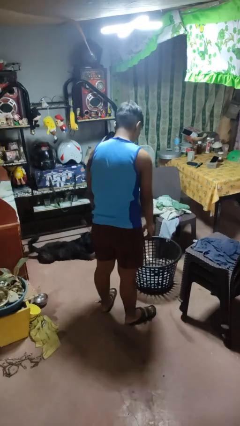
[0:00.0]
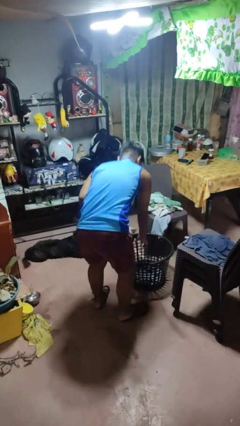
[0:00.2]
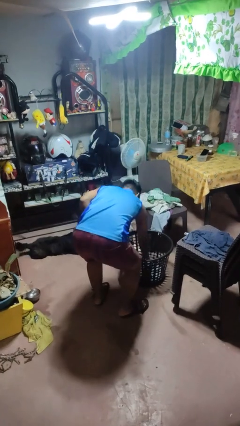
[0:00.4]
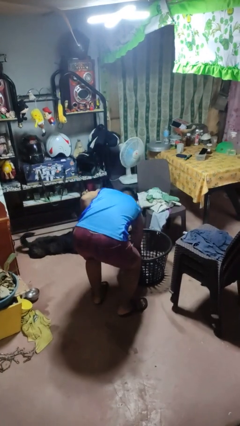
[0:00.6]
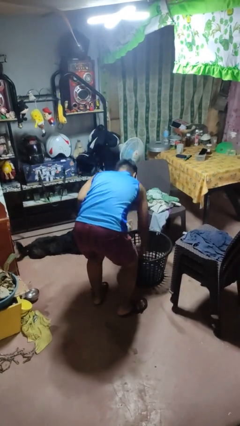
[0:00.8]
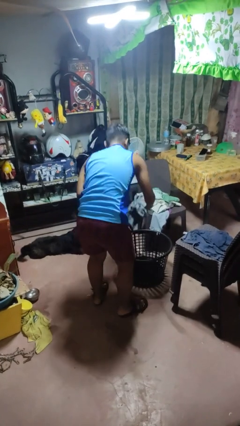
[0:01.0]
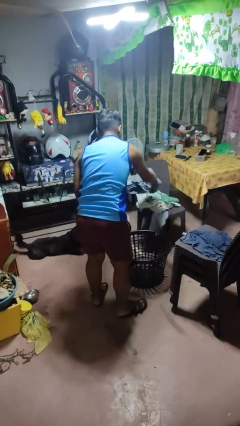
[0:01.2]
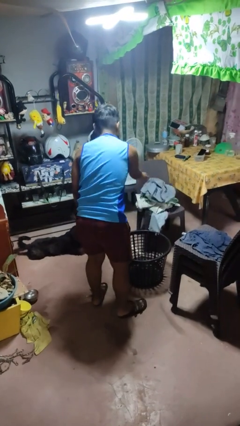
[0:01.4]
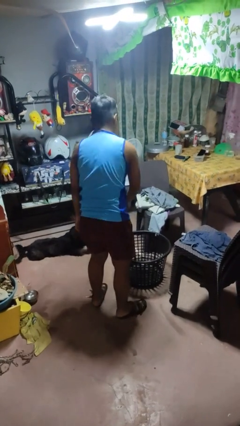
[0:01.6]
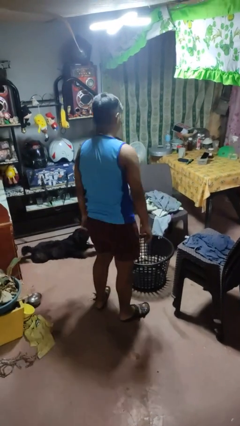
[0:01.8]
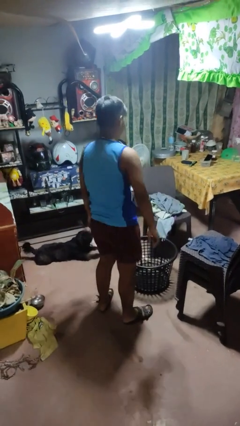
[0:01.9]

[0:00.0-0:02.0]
person takes object from basket

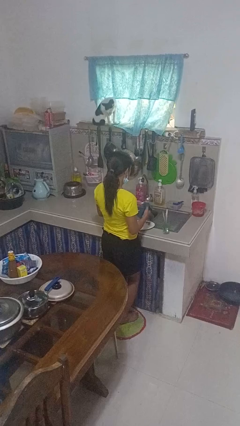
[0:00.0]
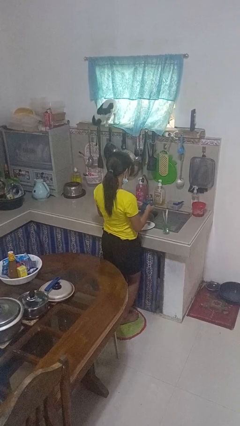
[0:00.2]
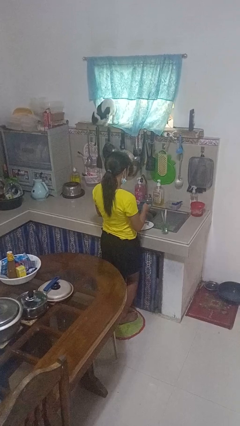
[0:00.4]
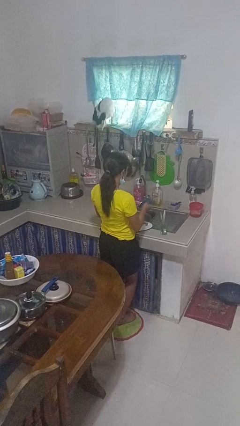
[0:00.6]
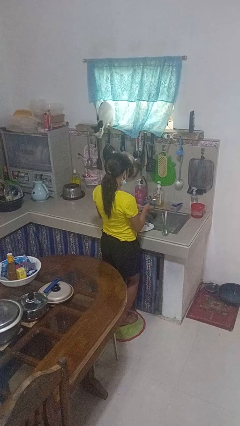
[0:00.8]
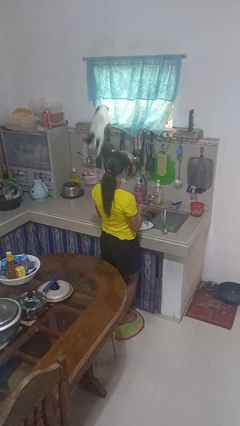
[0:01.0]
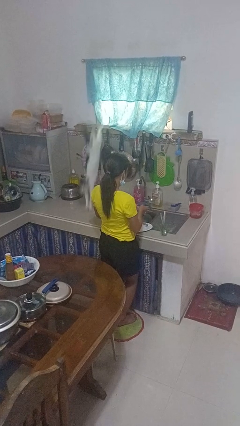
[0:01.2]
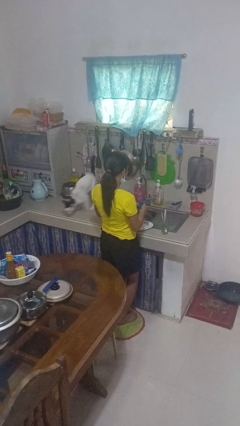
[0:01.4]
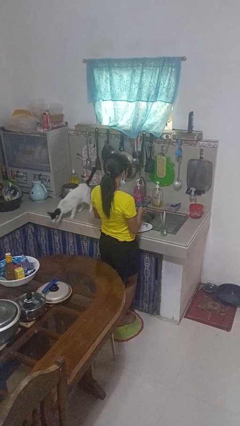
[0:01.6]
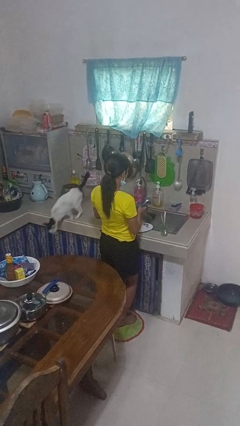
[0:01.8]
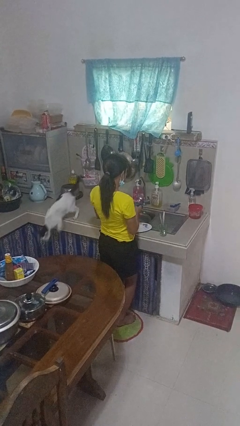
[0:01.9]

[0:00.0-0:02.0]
person dries dish

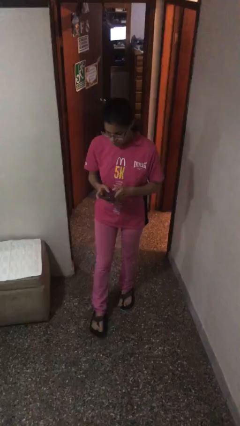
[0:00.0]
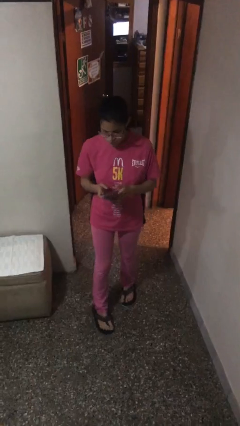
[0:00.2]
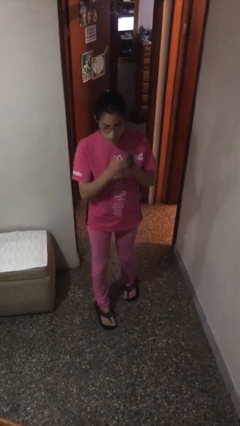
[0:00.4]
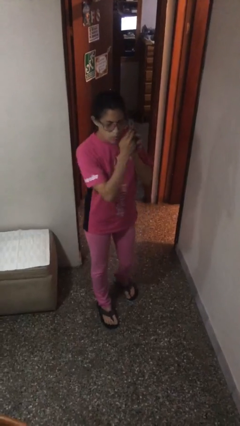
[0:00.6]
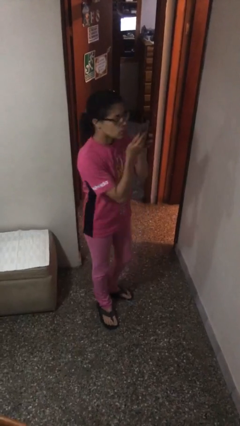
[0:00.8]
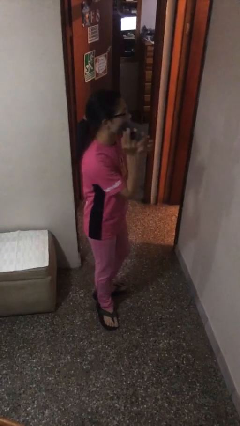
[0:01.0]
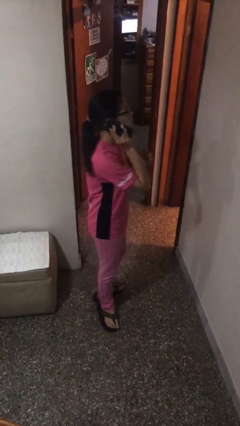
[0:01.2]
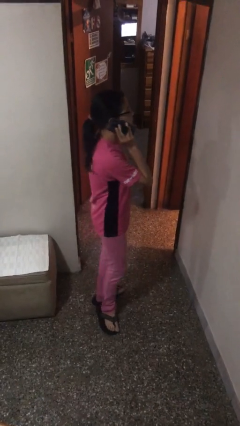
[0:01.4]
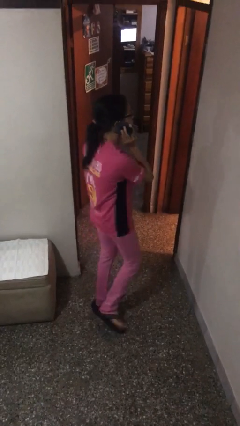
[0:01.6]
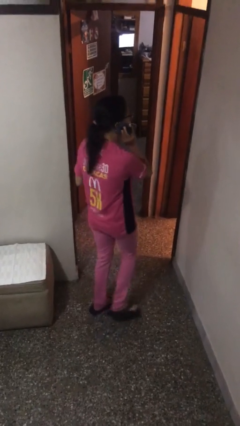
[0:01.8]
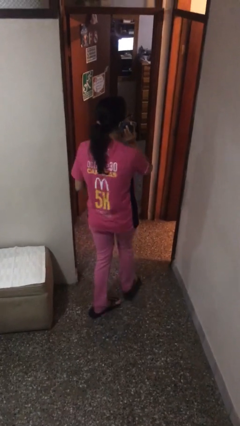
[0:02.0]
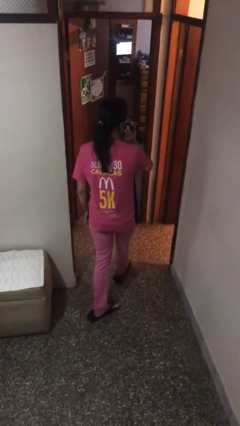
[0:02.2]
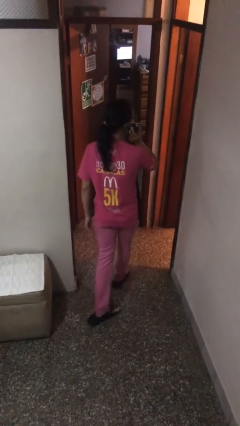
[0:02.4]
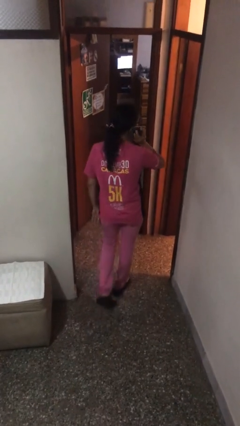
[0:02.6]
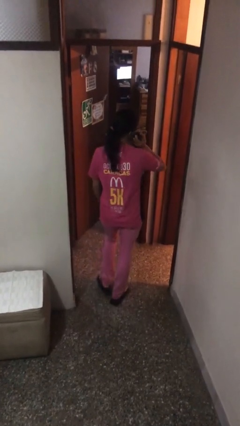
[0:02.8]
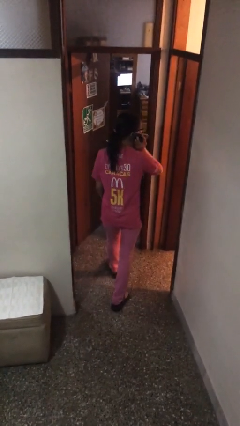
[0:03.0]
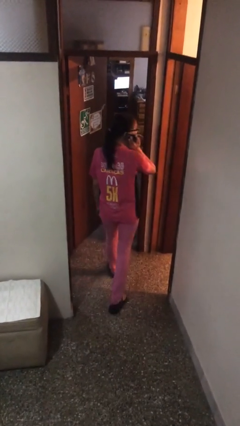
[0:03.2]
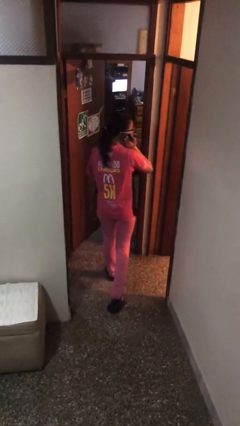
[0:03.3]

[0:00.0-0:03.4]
person talks on phone

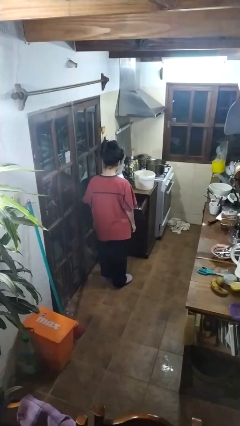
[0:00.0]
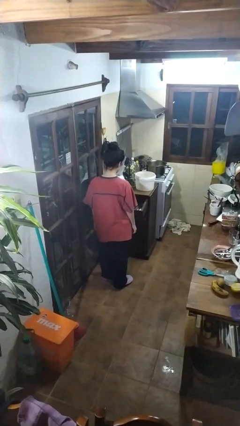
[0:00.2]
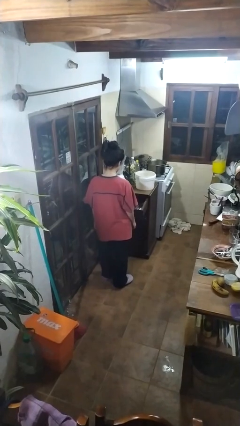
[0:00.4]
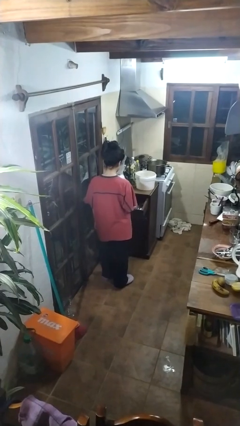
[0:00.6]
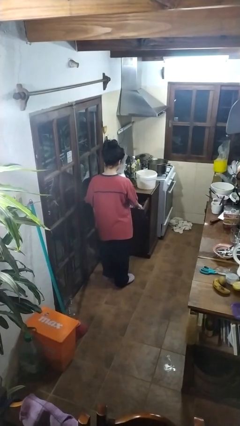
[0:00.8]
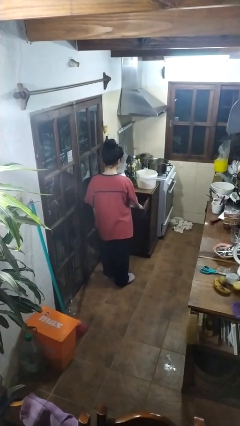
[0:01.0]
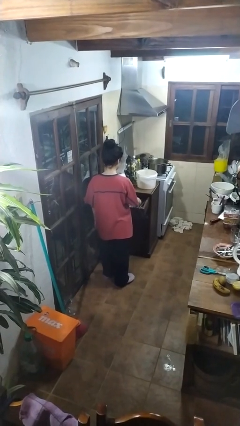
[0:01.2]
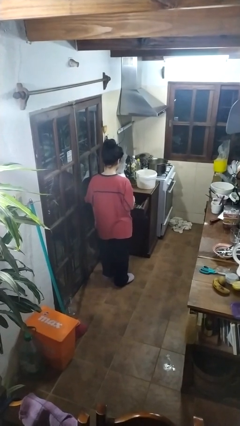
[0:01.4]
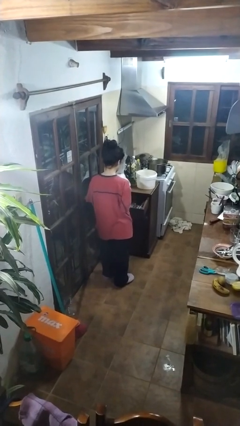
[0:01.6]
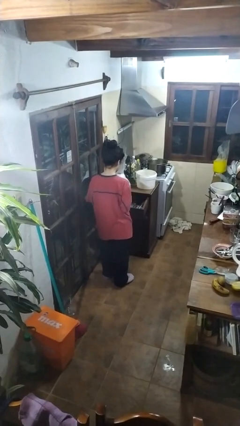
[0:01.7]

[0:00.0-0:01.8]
person takes object from kitchen drawer

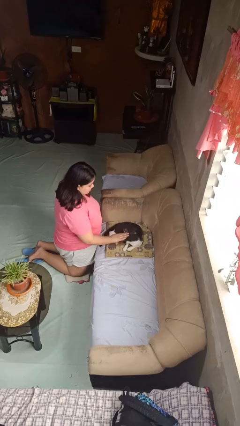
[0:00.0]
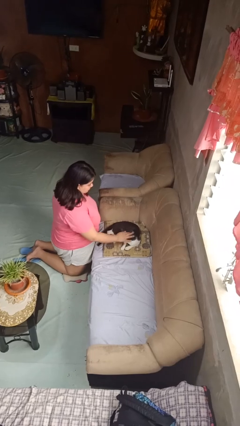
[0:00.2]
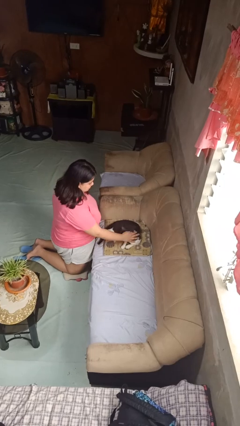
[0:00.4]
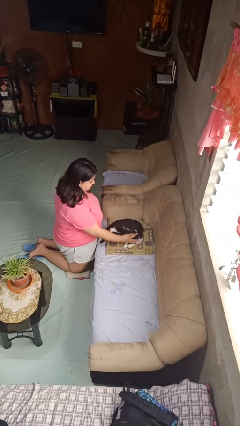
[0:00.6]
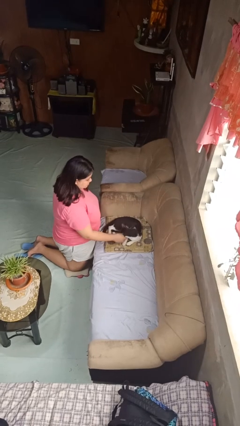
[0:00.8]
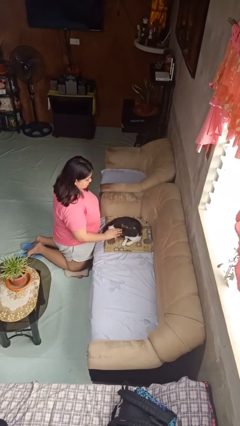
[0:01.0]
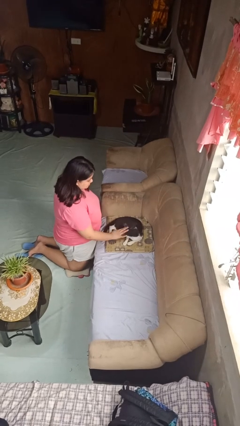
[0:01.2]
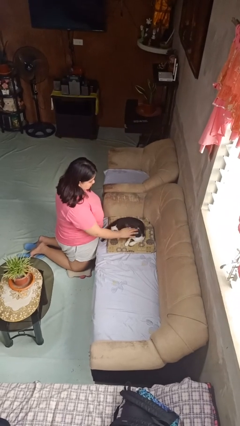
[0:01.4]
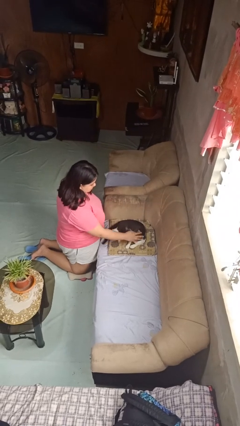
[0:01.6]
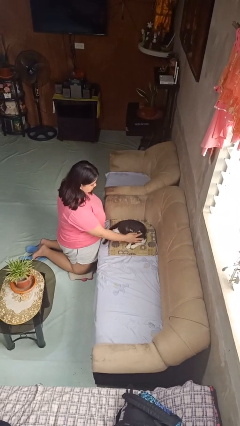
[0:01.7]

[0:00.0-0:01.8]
person pets cat

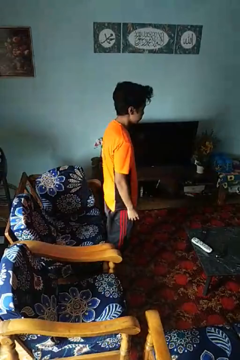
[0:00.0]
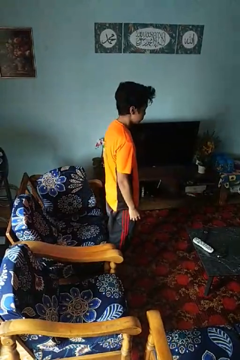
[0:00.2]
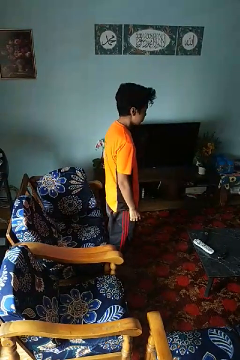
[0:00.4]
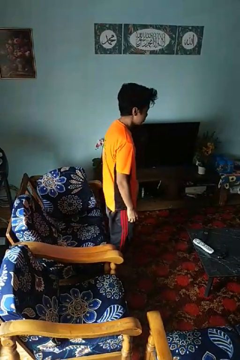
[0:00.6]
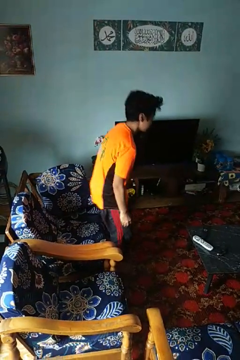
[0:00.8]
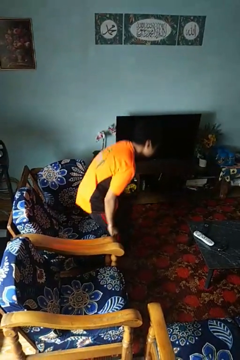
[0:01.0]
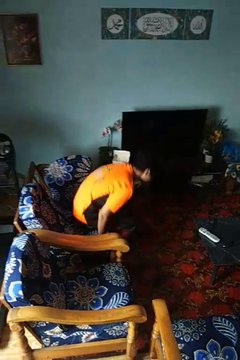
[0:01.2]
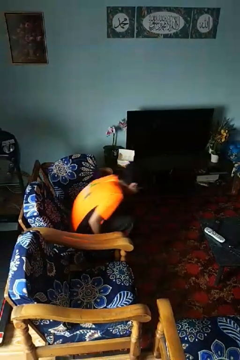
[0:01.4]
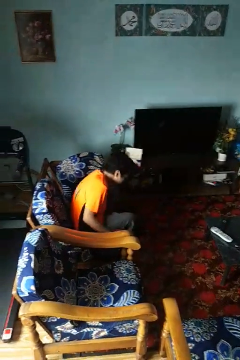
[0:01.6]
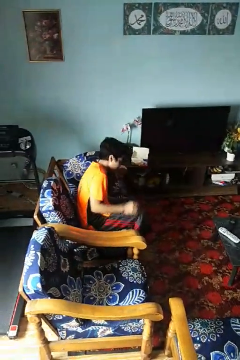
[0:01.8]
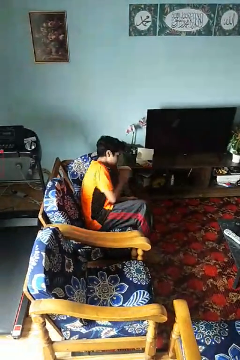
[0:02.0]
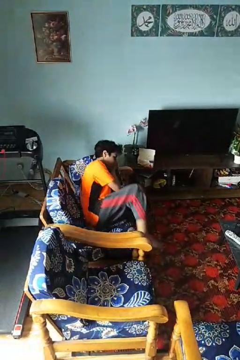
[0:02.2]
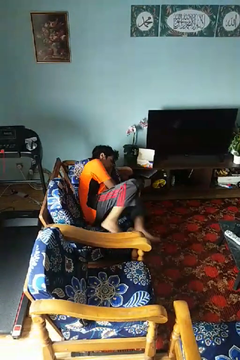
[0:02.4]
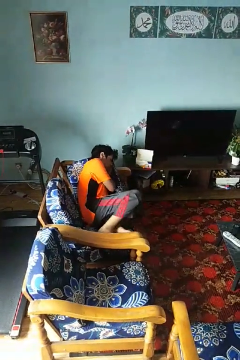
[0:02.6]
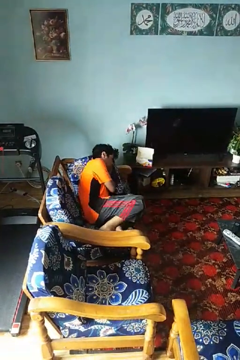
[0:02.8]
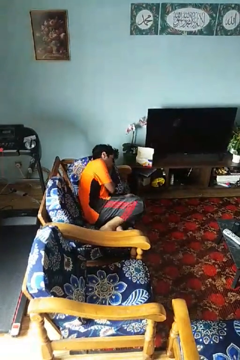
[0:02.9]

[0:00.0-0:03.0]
person lies down on couch

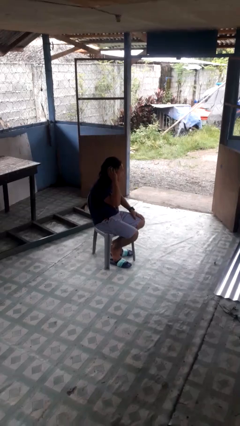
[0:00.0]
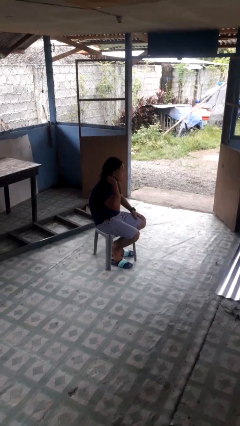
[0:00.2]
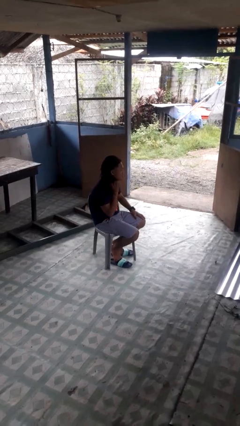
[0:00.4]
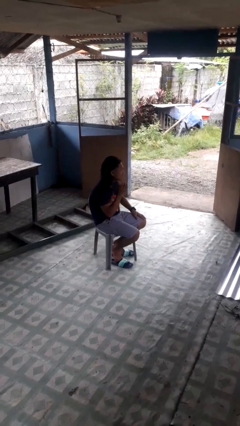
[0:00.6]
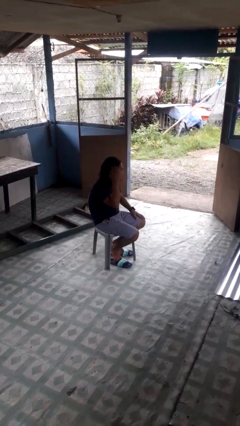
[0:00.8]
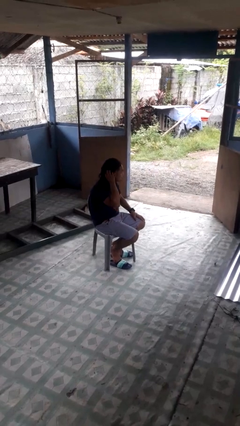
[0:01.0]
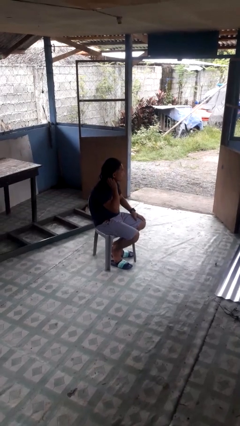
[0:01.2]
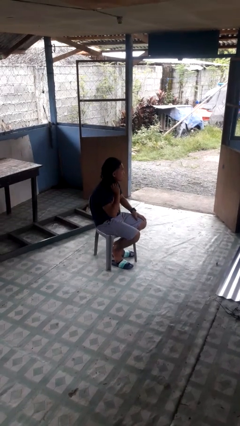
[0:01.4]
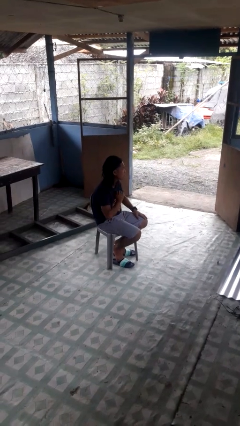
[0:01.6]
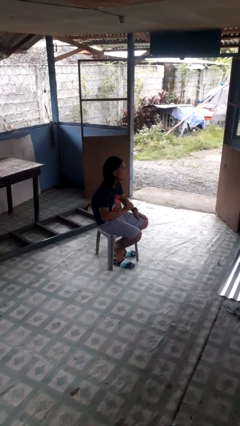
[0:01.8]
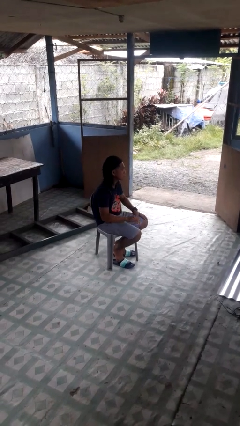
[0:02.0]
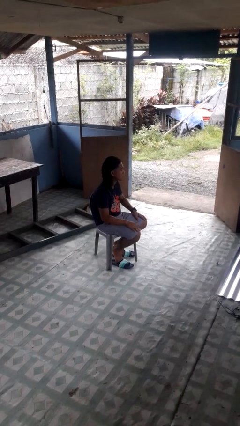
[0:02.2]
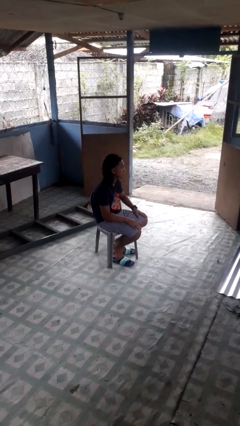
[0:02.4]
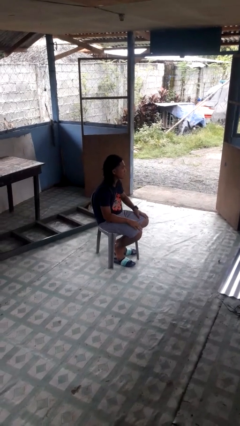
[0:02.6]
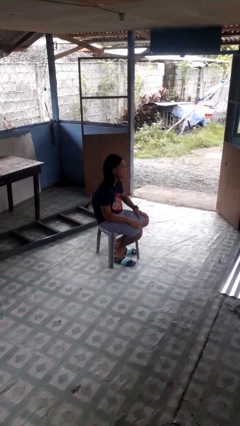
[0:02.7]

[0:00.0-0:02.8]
person strokes hair
